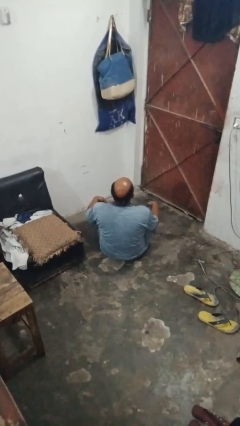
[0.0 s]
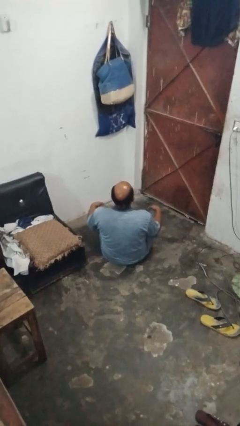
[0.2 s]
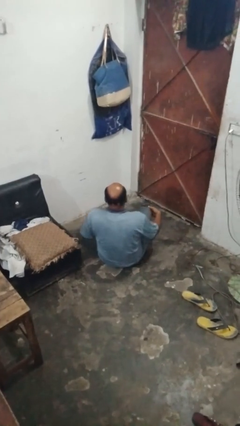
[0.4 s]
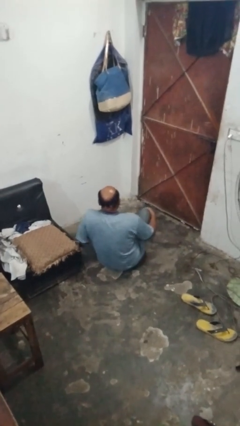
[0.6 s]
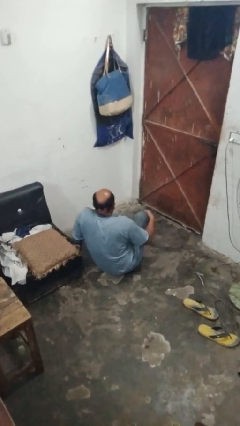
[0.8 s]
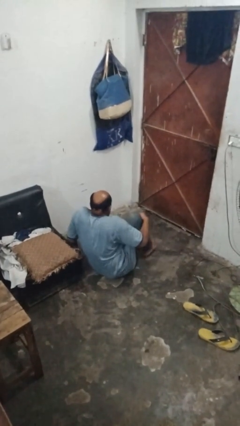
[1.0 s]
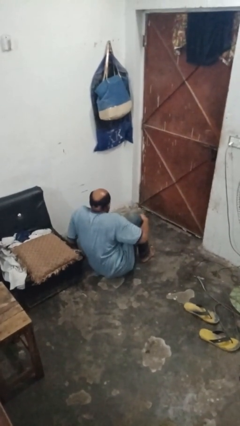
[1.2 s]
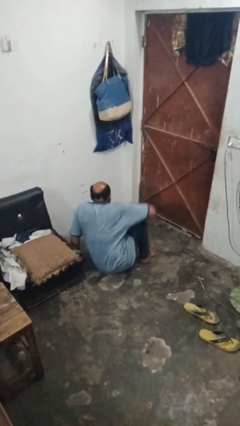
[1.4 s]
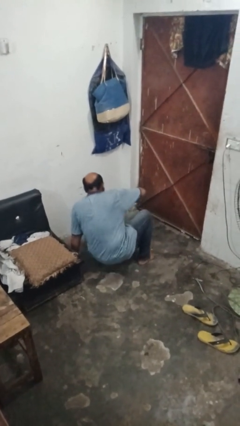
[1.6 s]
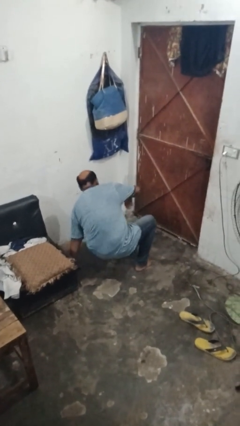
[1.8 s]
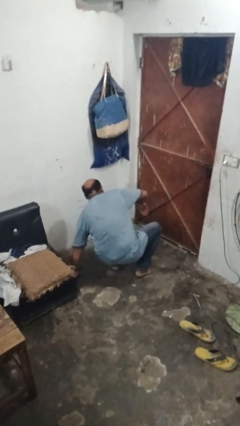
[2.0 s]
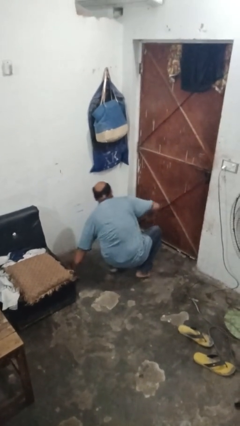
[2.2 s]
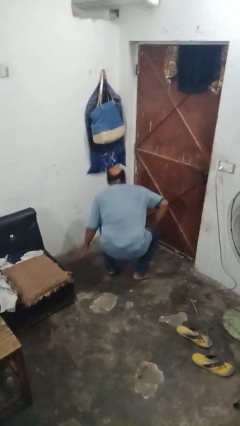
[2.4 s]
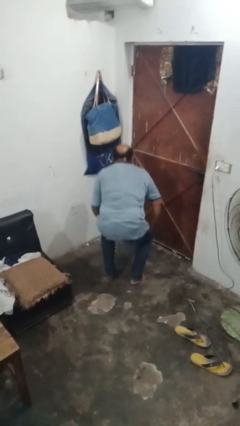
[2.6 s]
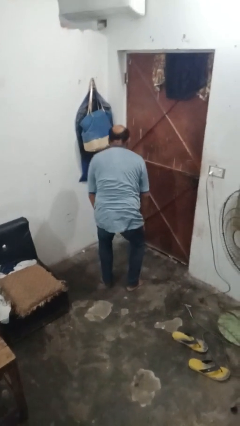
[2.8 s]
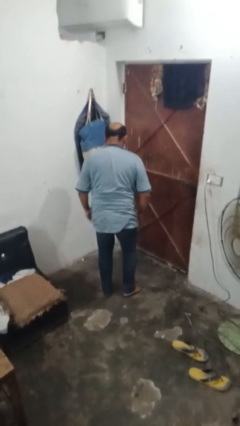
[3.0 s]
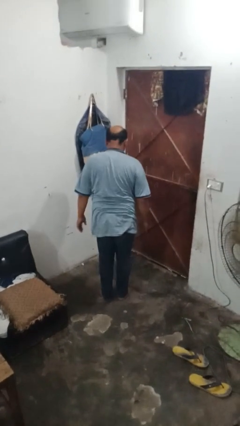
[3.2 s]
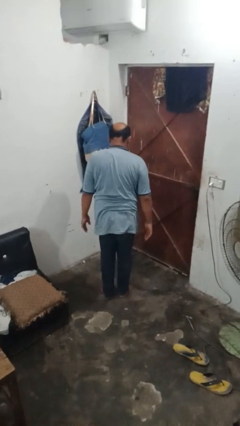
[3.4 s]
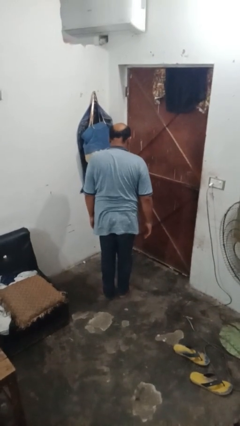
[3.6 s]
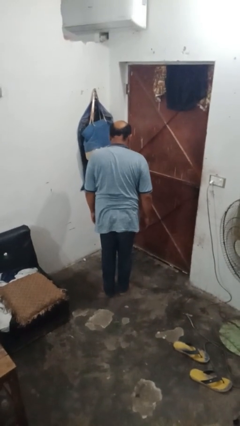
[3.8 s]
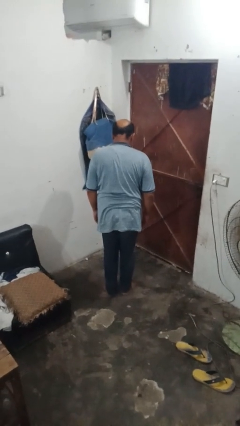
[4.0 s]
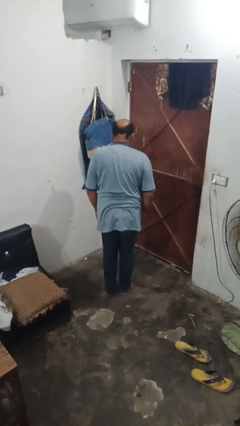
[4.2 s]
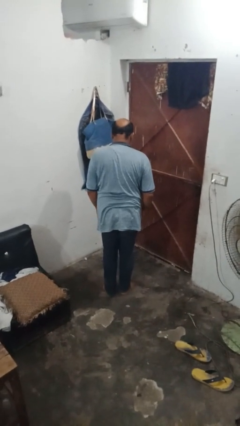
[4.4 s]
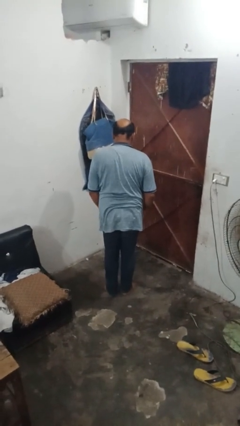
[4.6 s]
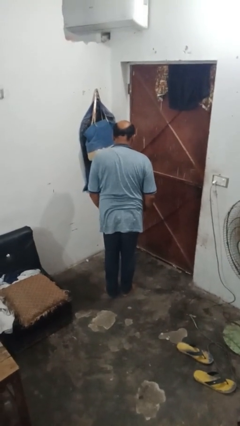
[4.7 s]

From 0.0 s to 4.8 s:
person stands up from floor

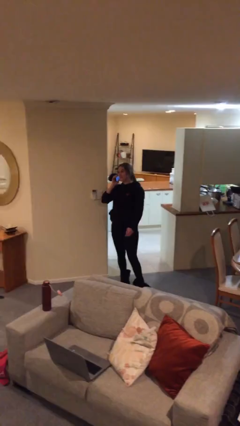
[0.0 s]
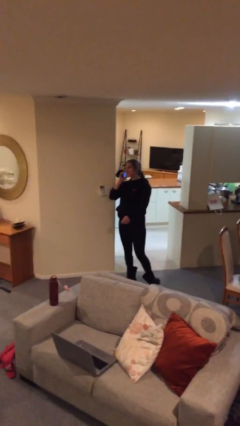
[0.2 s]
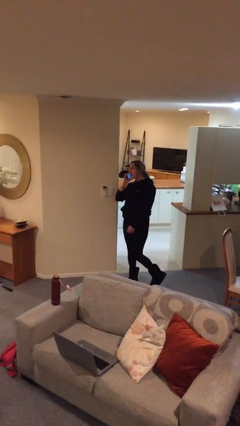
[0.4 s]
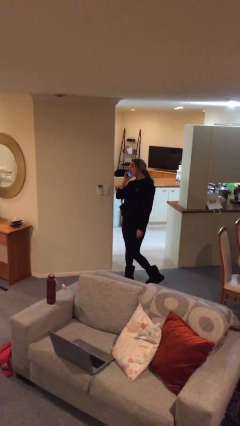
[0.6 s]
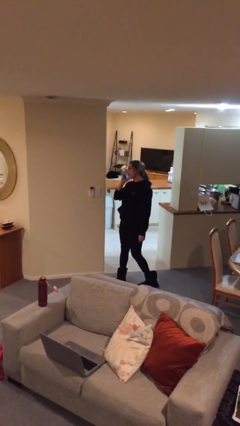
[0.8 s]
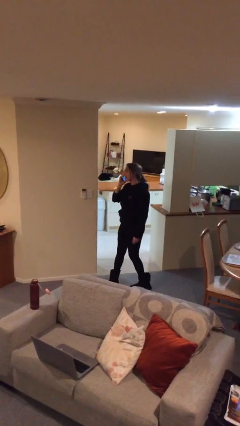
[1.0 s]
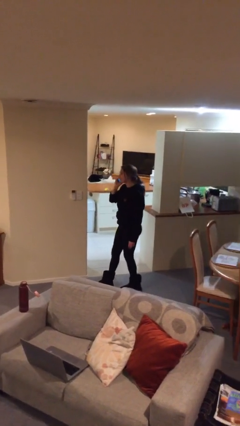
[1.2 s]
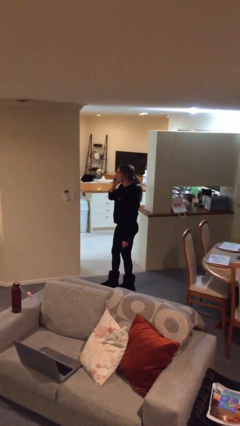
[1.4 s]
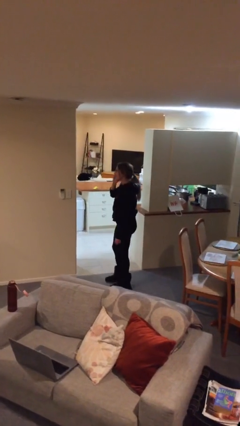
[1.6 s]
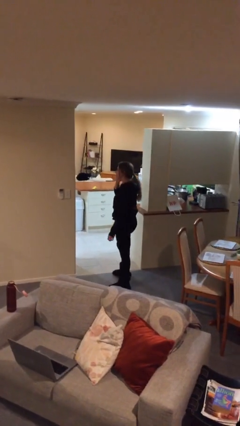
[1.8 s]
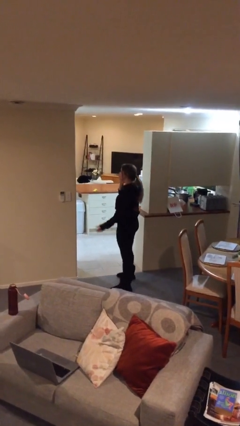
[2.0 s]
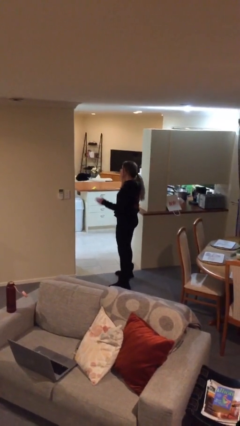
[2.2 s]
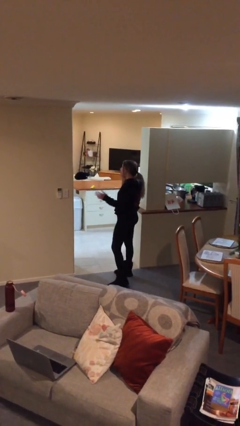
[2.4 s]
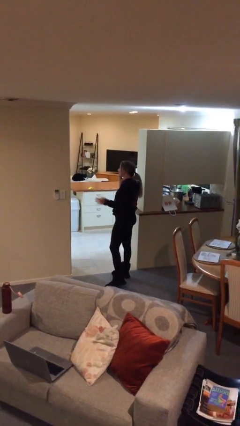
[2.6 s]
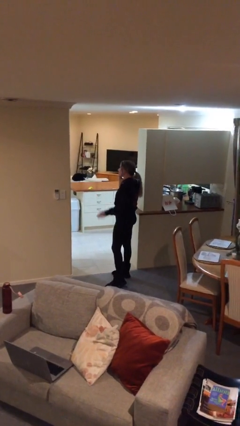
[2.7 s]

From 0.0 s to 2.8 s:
person talks on phone

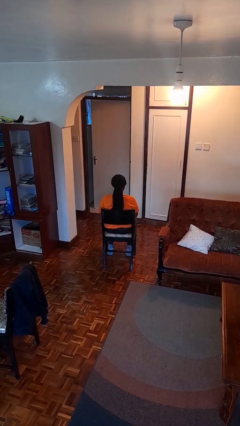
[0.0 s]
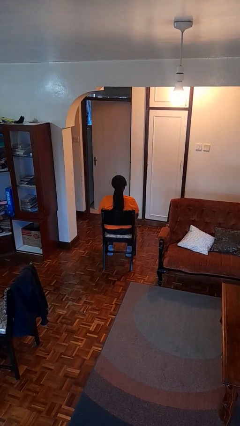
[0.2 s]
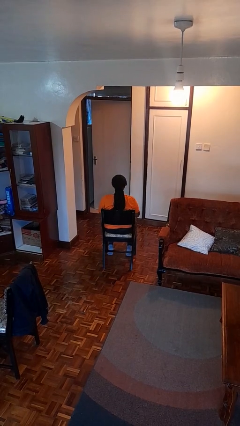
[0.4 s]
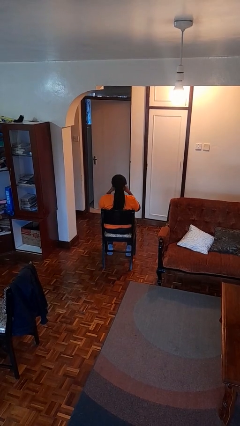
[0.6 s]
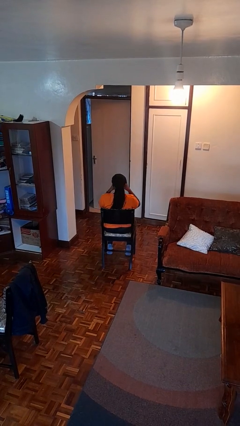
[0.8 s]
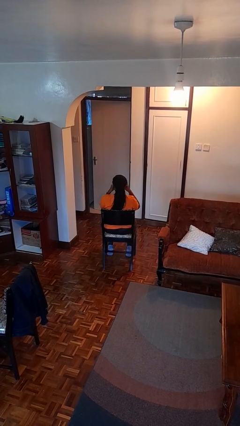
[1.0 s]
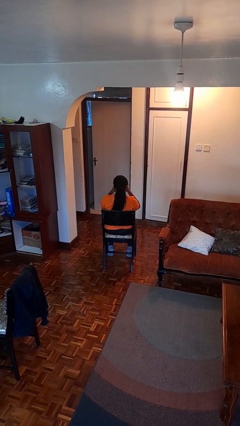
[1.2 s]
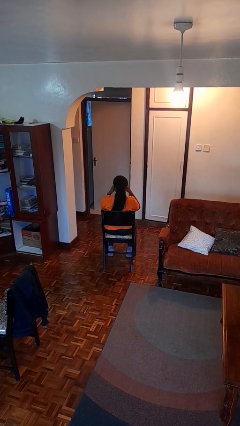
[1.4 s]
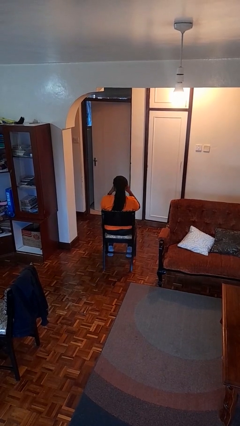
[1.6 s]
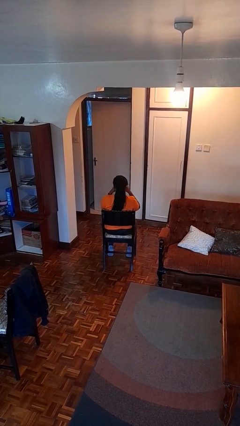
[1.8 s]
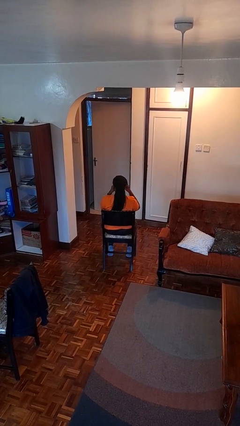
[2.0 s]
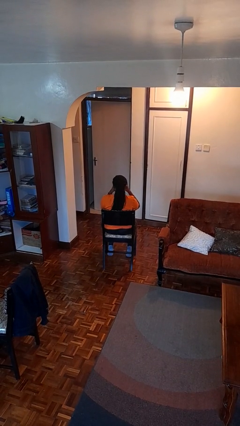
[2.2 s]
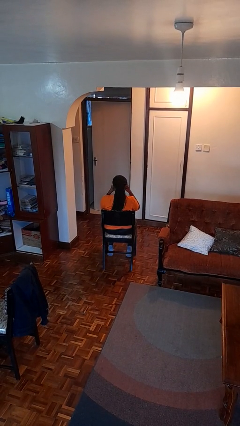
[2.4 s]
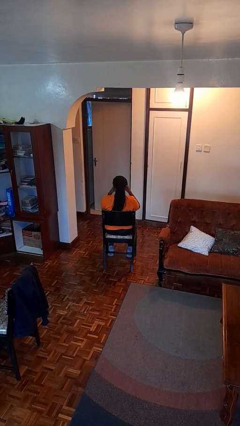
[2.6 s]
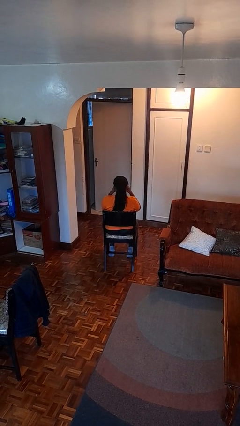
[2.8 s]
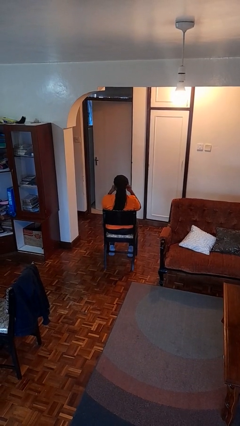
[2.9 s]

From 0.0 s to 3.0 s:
person rubs eyes

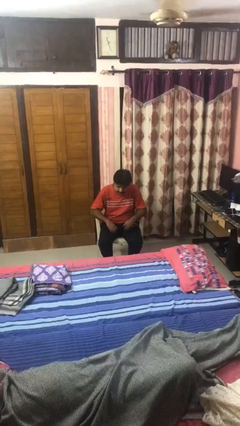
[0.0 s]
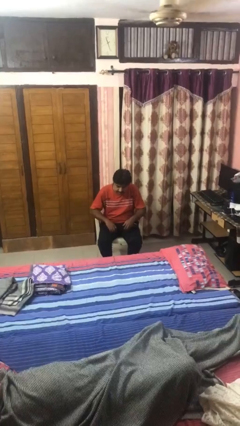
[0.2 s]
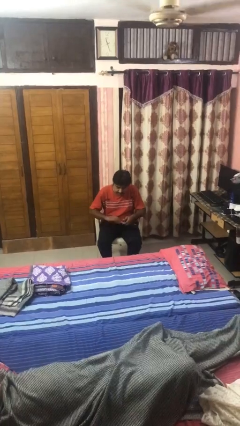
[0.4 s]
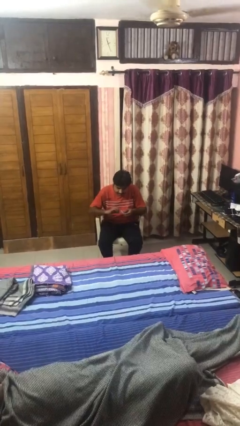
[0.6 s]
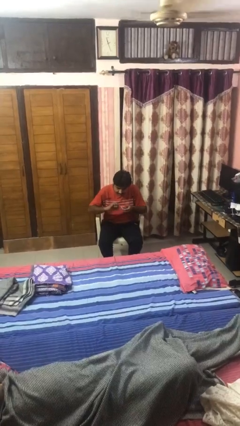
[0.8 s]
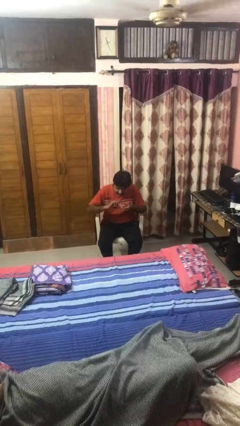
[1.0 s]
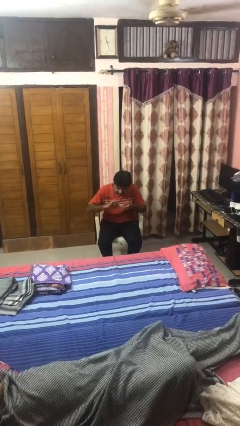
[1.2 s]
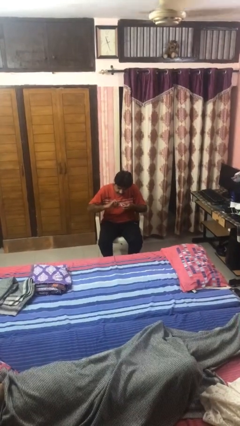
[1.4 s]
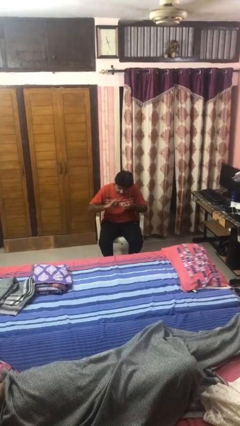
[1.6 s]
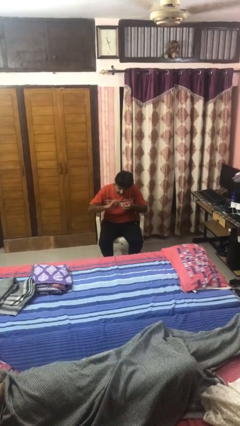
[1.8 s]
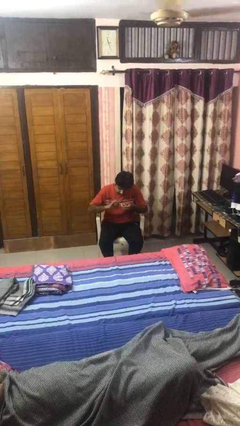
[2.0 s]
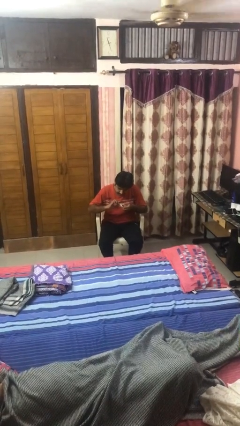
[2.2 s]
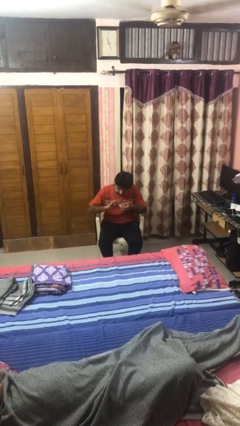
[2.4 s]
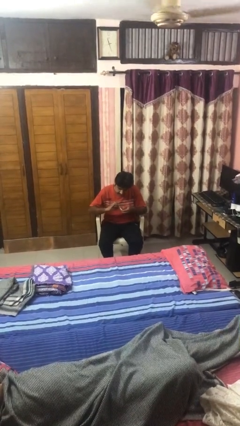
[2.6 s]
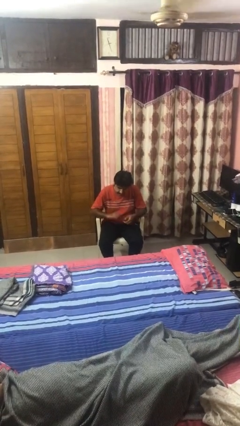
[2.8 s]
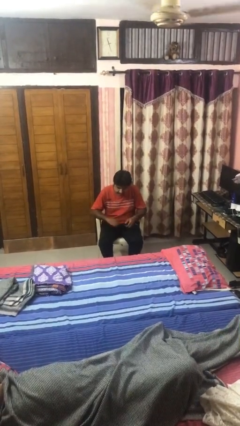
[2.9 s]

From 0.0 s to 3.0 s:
person clips fingernails

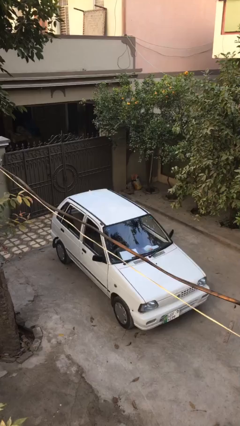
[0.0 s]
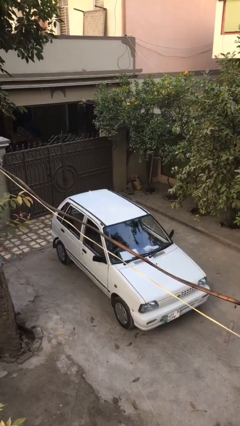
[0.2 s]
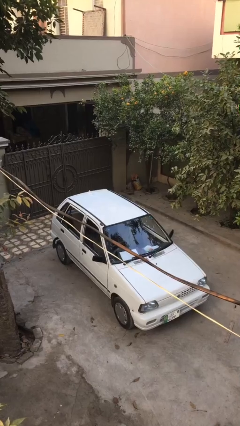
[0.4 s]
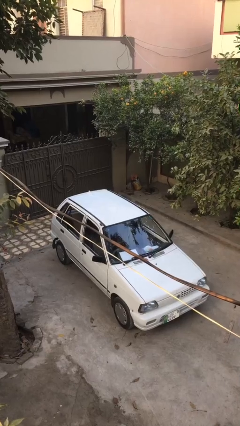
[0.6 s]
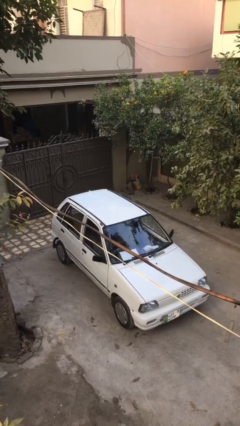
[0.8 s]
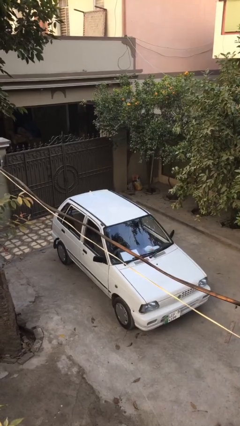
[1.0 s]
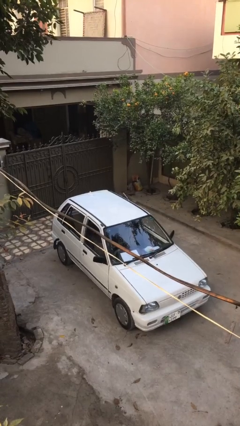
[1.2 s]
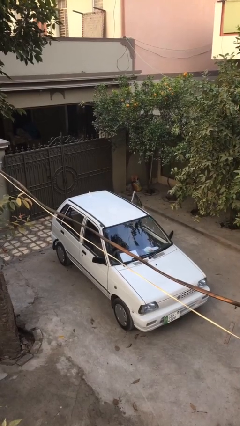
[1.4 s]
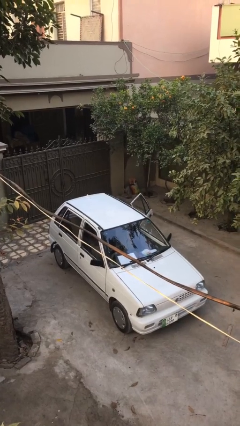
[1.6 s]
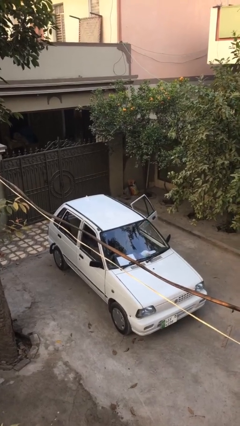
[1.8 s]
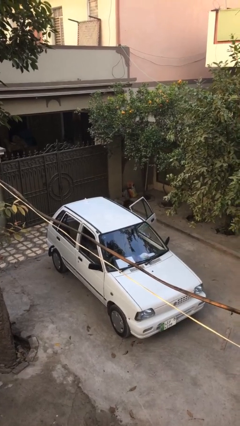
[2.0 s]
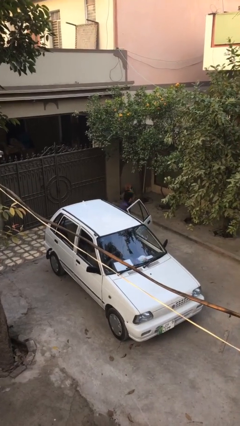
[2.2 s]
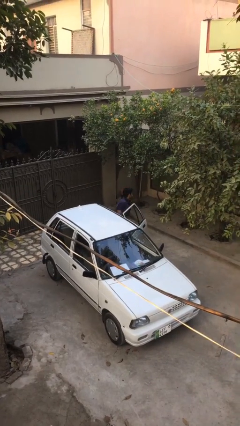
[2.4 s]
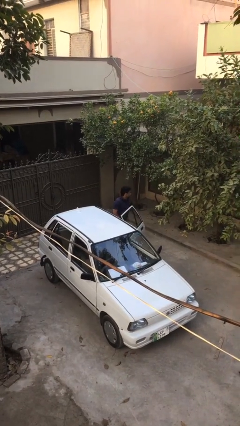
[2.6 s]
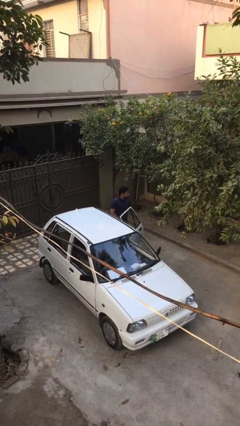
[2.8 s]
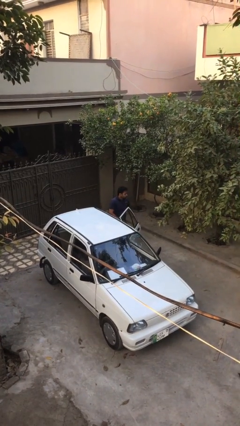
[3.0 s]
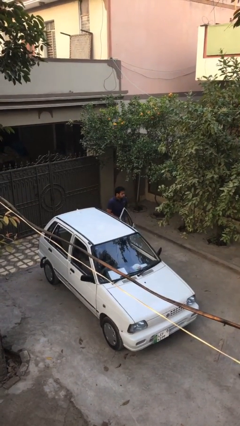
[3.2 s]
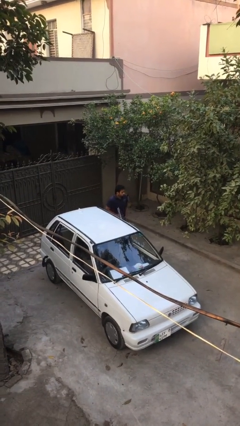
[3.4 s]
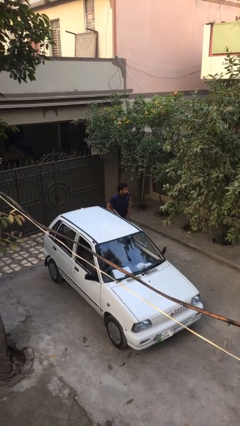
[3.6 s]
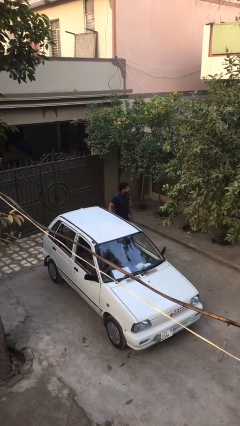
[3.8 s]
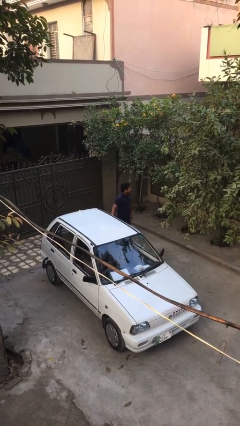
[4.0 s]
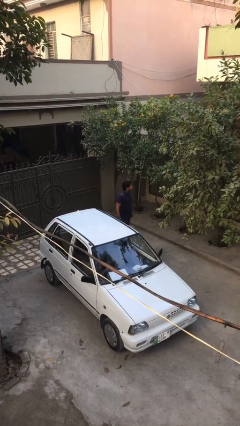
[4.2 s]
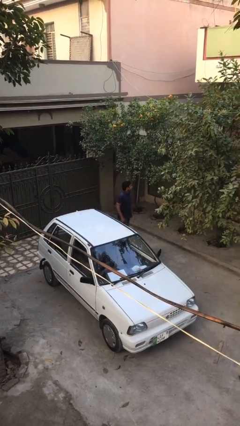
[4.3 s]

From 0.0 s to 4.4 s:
person exits car
